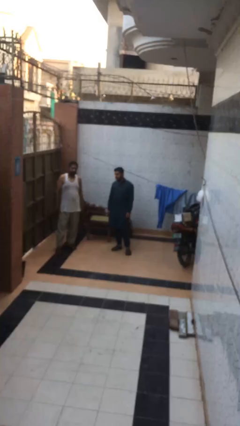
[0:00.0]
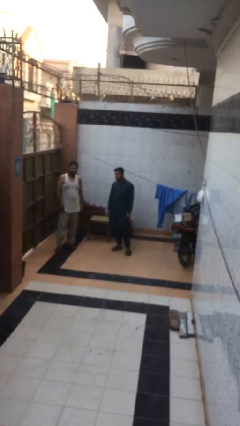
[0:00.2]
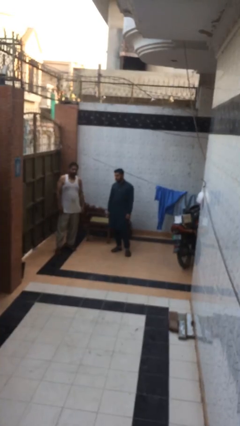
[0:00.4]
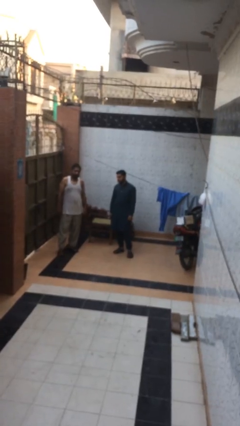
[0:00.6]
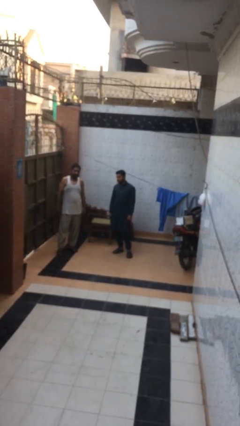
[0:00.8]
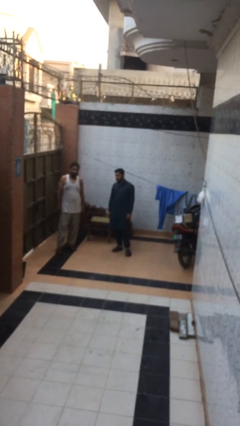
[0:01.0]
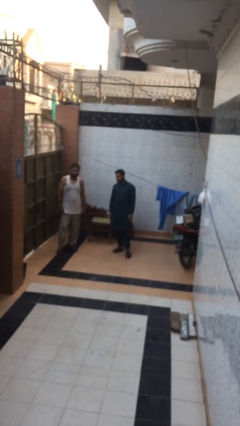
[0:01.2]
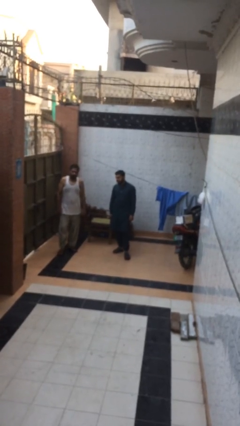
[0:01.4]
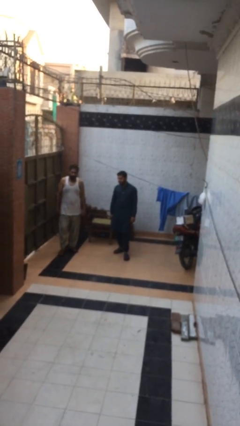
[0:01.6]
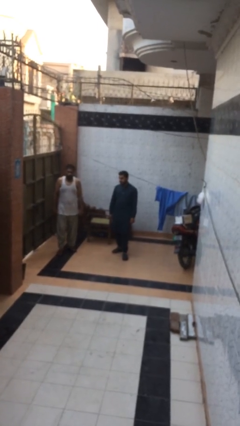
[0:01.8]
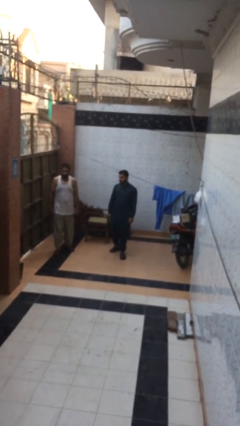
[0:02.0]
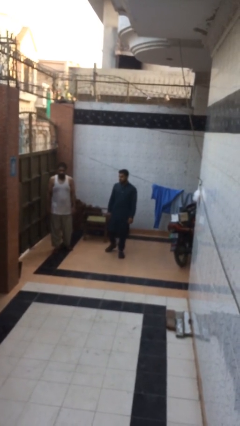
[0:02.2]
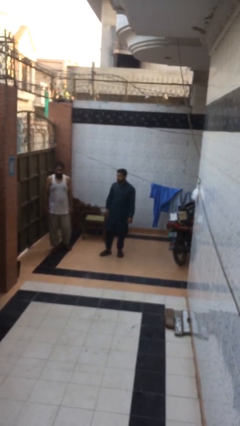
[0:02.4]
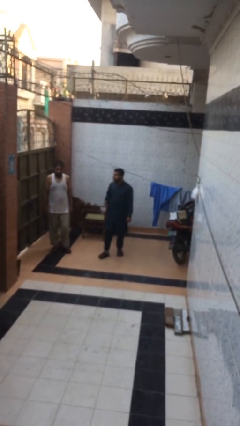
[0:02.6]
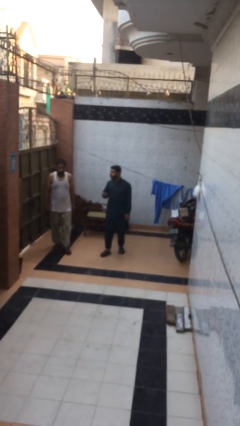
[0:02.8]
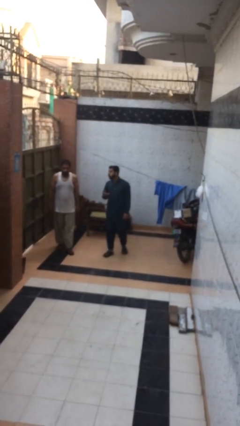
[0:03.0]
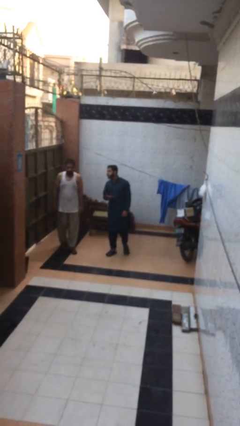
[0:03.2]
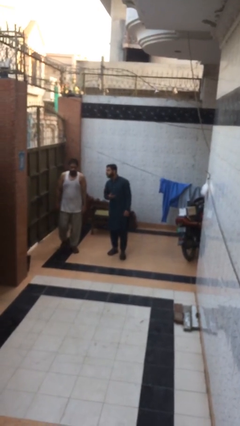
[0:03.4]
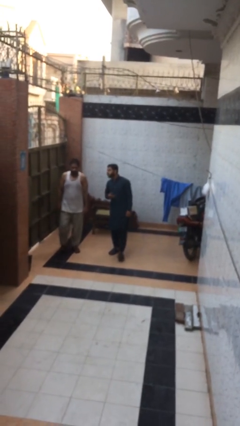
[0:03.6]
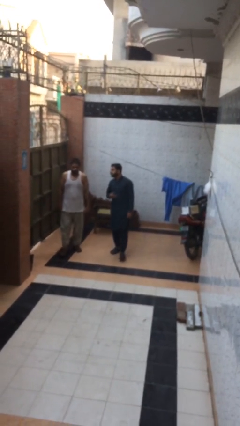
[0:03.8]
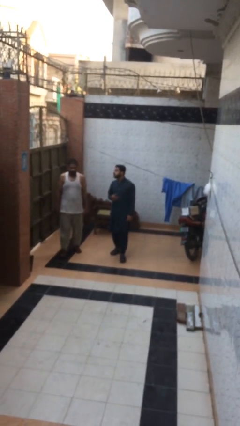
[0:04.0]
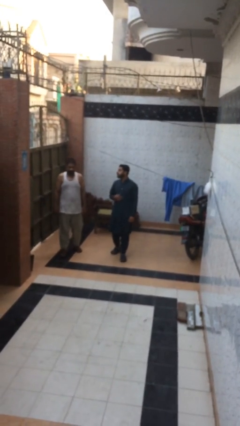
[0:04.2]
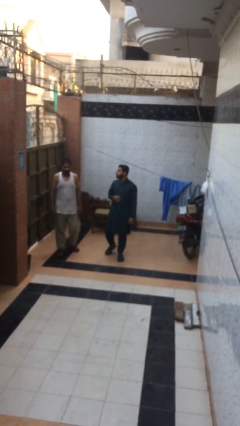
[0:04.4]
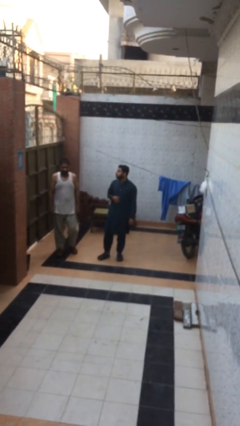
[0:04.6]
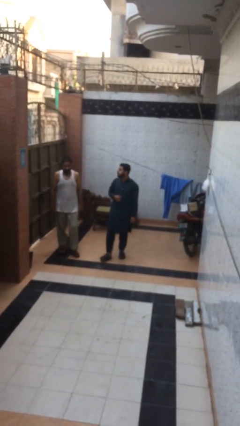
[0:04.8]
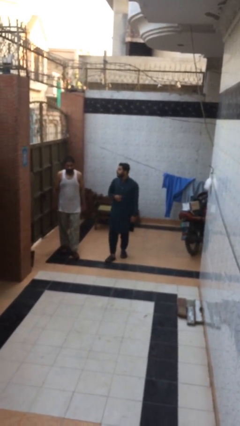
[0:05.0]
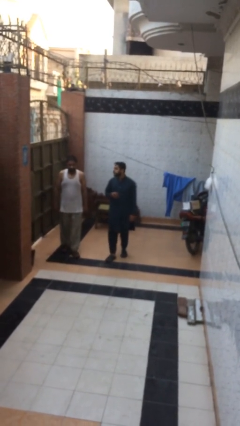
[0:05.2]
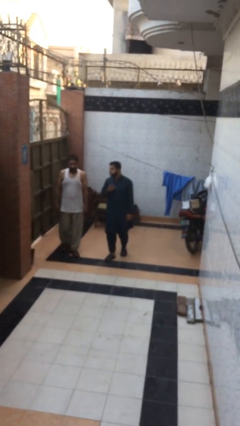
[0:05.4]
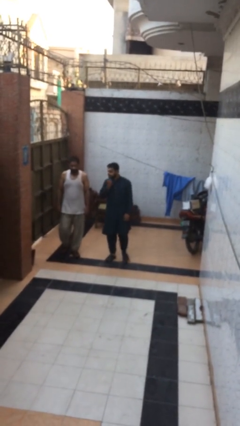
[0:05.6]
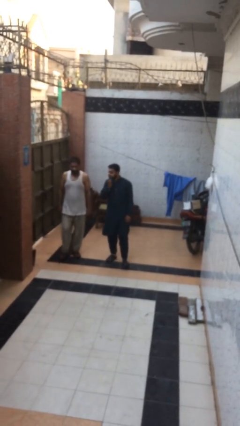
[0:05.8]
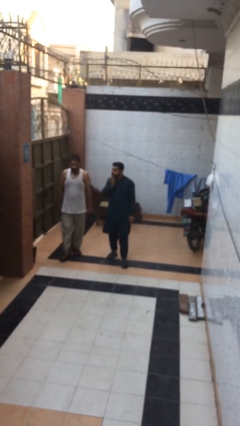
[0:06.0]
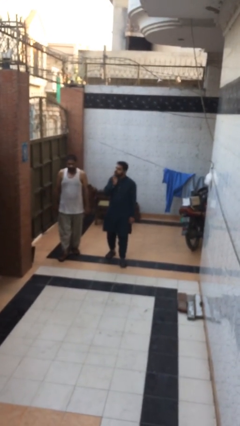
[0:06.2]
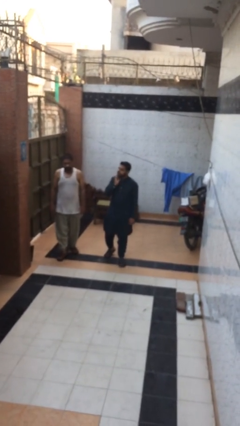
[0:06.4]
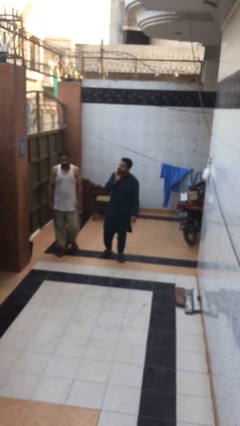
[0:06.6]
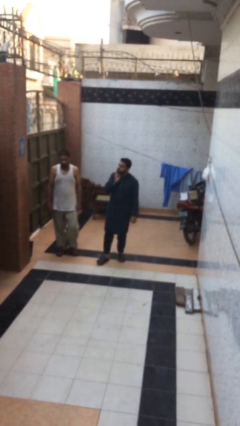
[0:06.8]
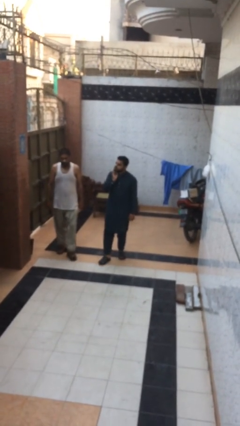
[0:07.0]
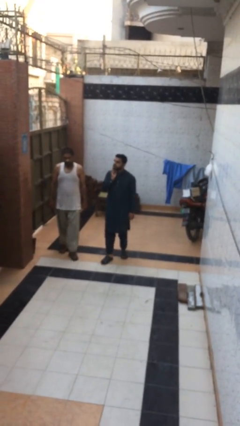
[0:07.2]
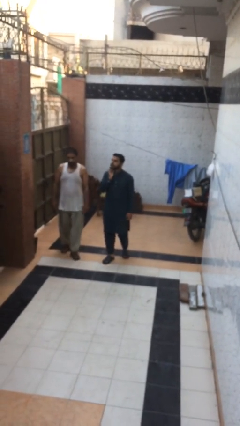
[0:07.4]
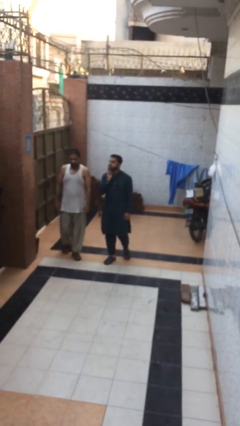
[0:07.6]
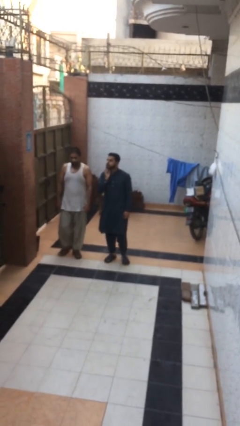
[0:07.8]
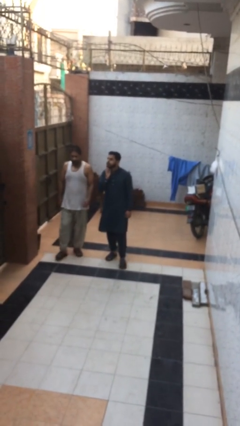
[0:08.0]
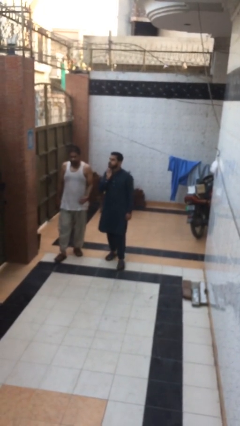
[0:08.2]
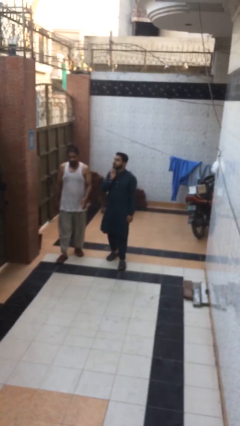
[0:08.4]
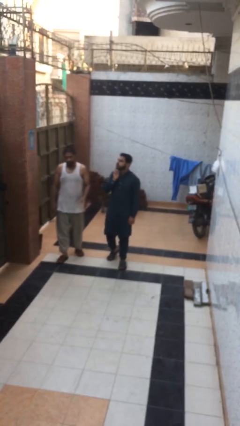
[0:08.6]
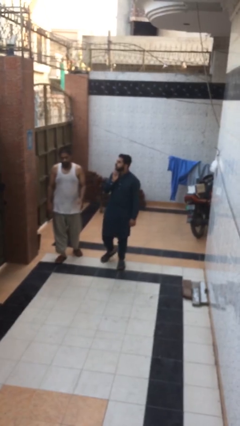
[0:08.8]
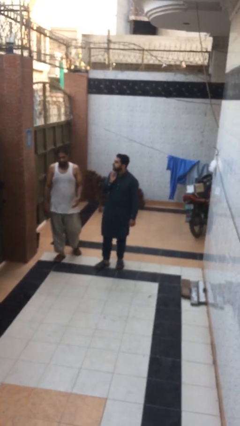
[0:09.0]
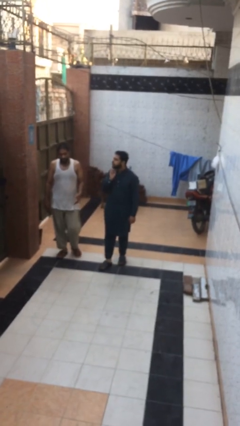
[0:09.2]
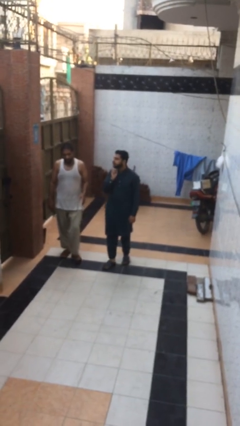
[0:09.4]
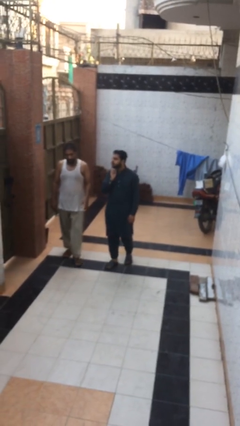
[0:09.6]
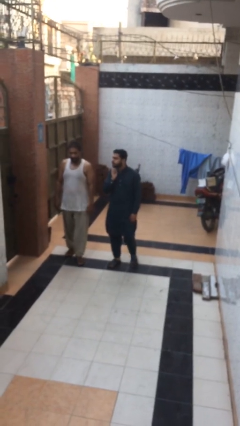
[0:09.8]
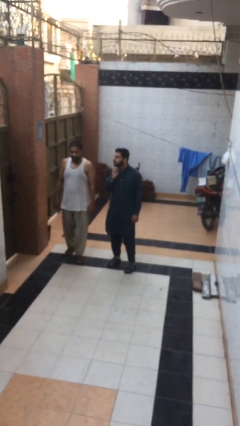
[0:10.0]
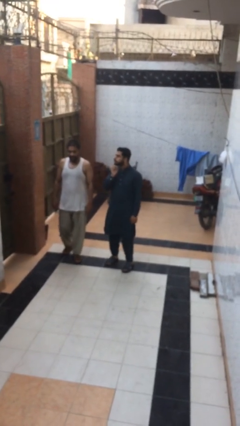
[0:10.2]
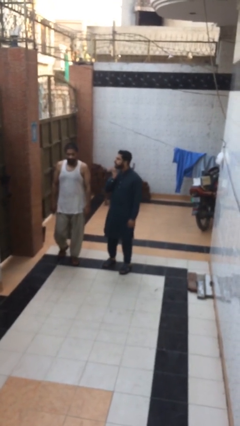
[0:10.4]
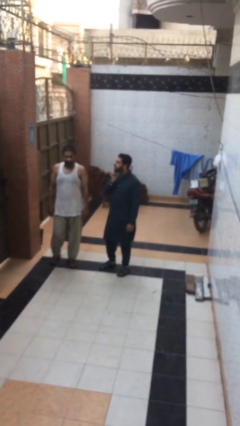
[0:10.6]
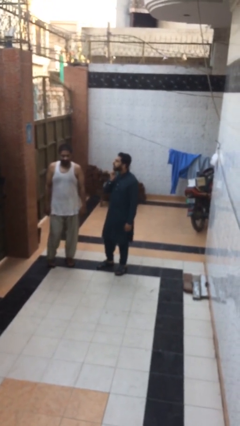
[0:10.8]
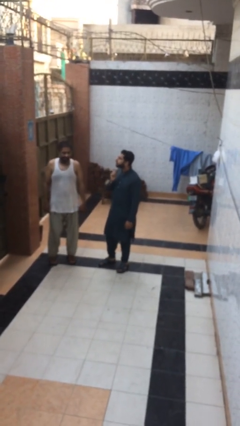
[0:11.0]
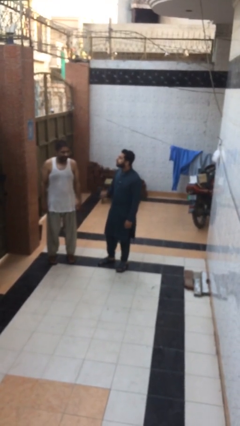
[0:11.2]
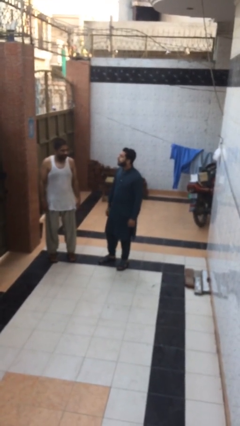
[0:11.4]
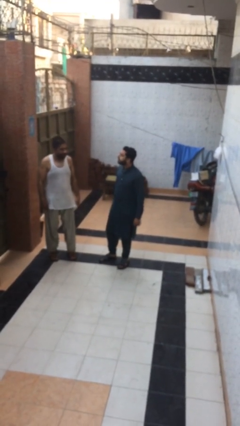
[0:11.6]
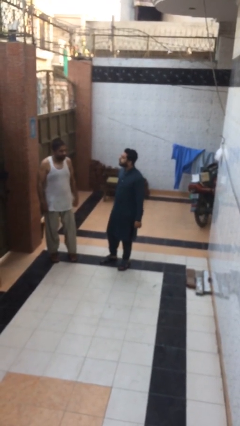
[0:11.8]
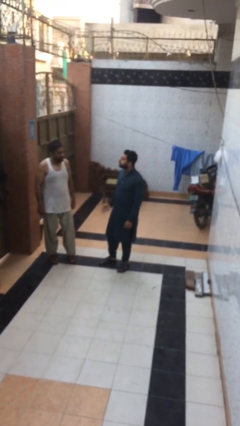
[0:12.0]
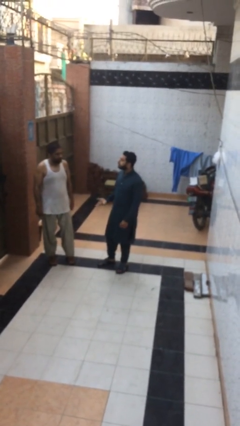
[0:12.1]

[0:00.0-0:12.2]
person talks to person

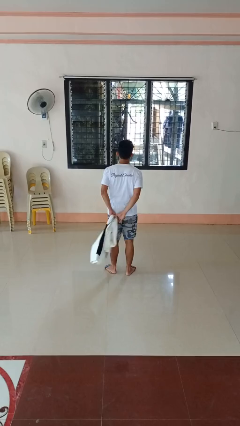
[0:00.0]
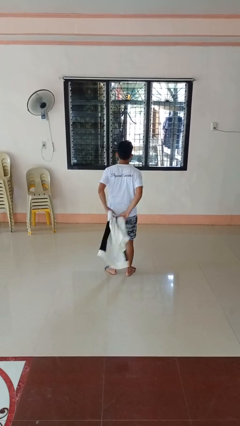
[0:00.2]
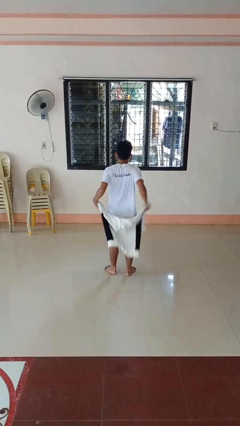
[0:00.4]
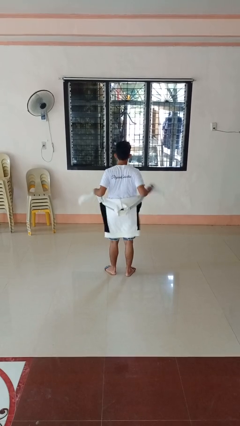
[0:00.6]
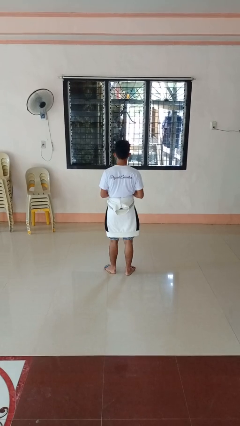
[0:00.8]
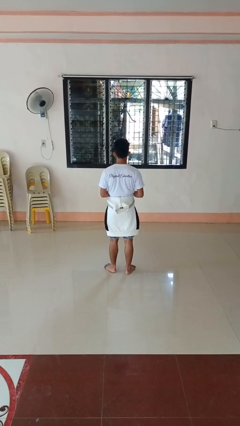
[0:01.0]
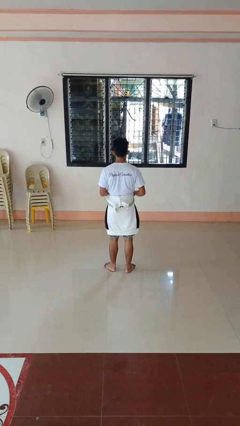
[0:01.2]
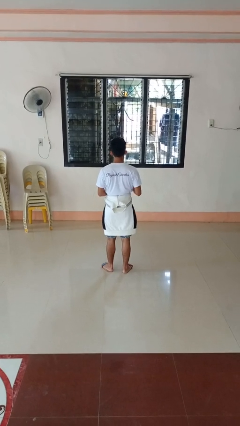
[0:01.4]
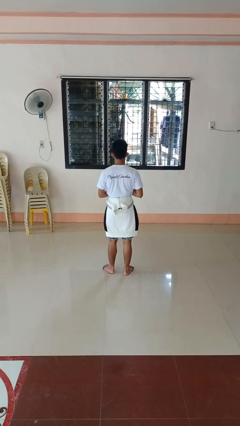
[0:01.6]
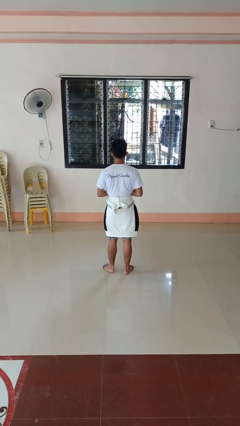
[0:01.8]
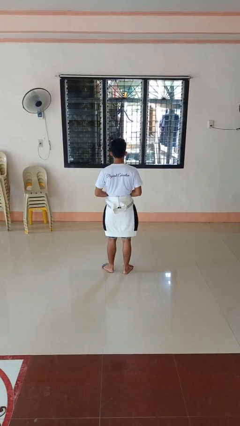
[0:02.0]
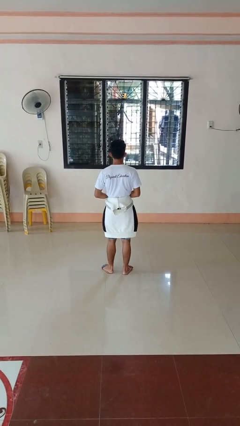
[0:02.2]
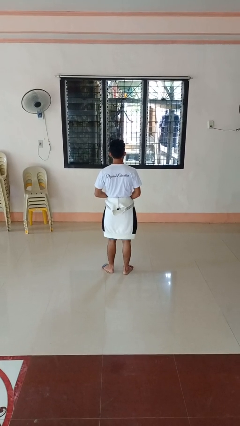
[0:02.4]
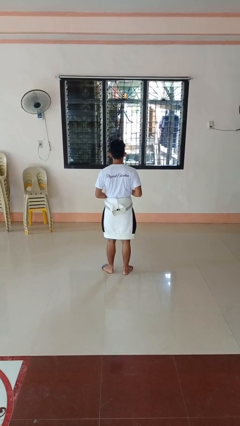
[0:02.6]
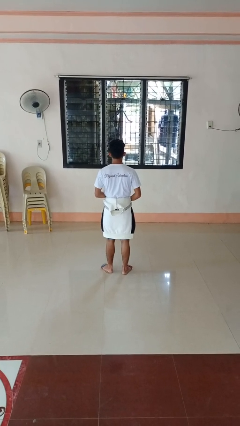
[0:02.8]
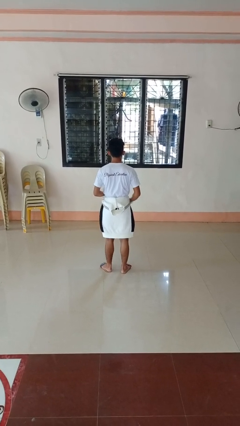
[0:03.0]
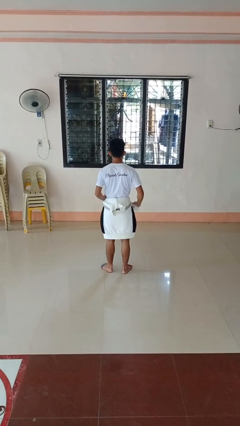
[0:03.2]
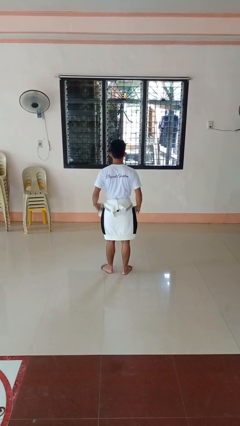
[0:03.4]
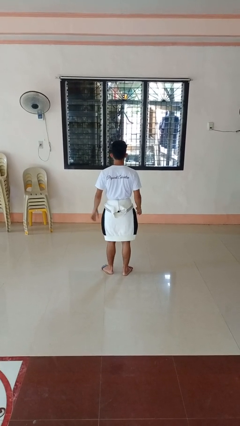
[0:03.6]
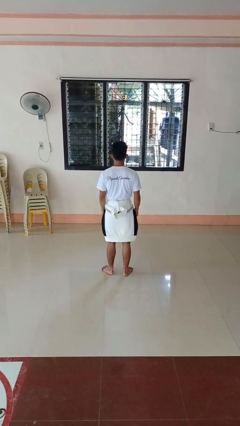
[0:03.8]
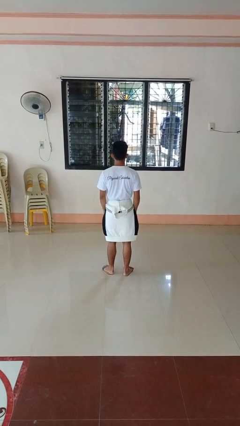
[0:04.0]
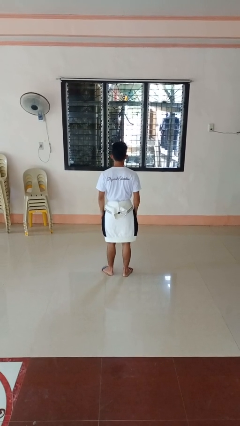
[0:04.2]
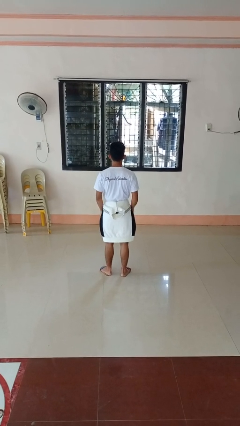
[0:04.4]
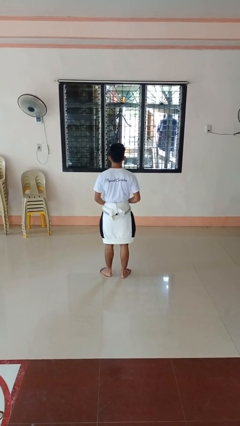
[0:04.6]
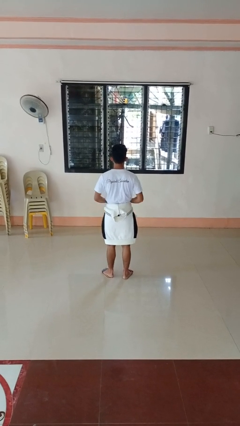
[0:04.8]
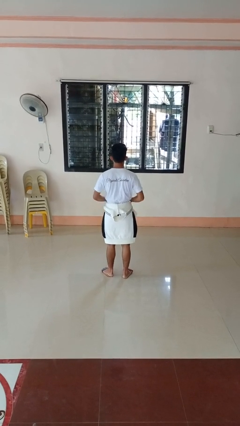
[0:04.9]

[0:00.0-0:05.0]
person ties jacket around waist

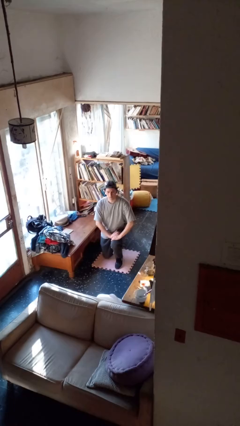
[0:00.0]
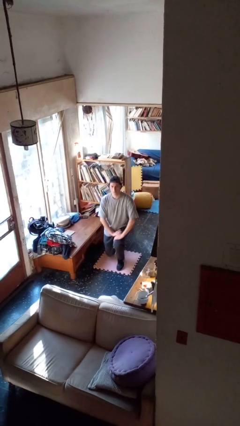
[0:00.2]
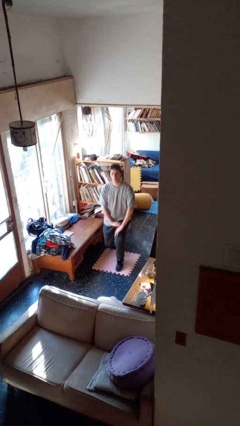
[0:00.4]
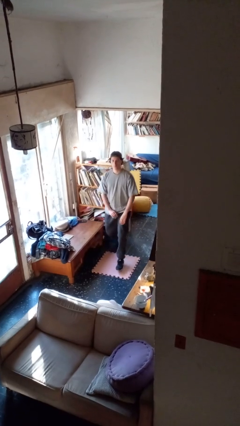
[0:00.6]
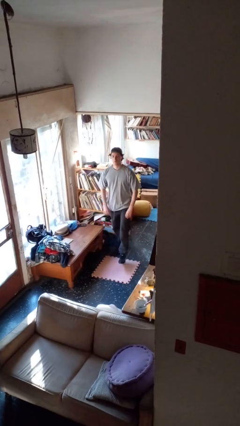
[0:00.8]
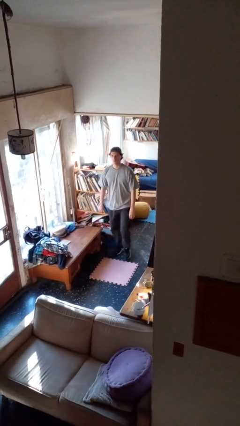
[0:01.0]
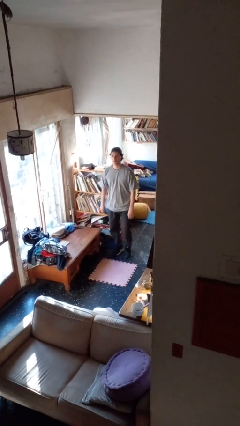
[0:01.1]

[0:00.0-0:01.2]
person stands up from floor
